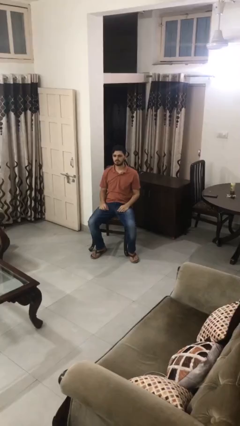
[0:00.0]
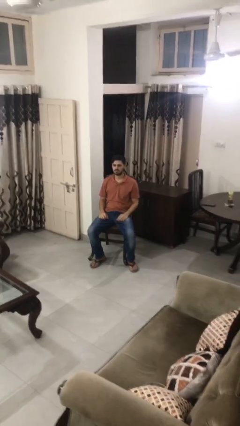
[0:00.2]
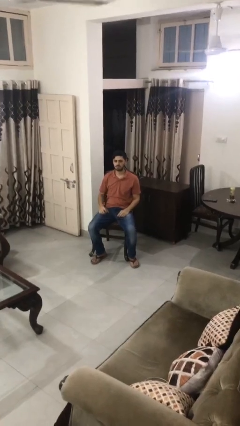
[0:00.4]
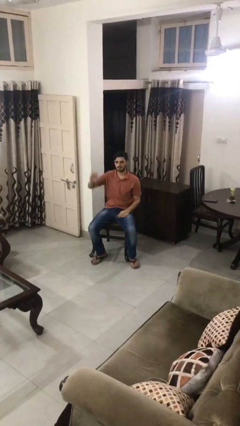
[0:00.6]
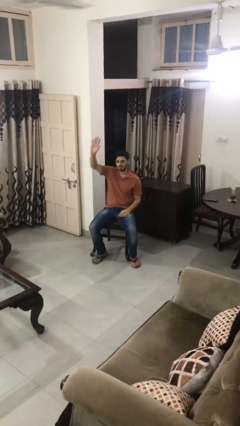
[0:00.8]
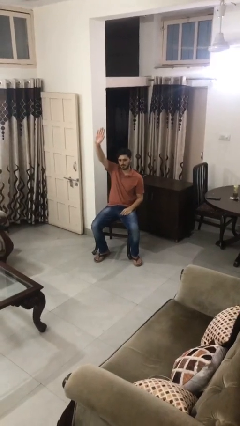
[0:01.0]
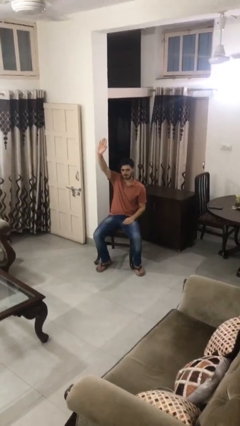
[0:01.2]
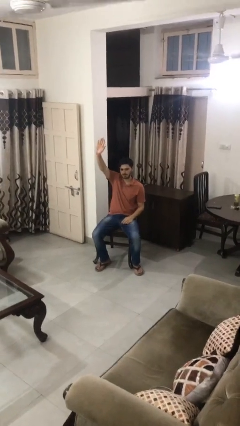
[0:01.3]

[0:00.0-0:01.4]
person gestures raise hand

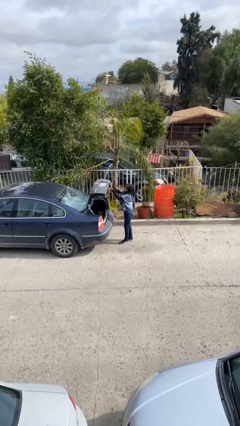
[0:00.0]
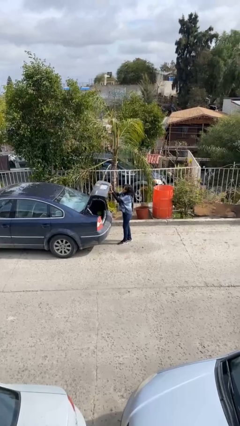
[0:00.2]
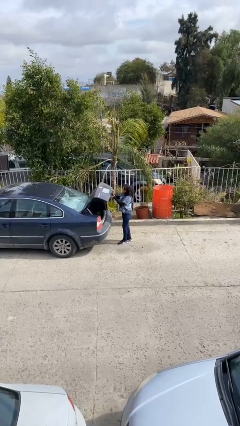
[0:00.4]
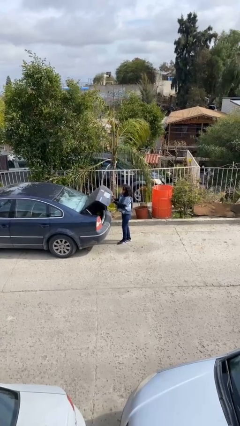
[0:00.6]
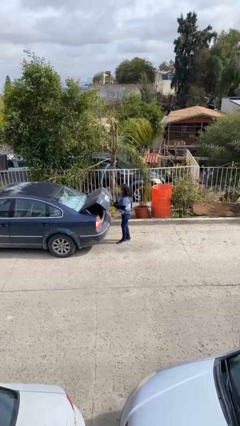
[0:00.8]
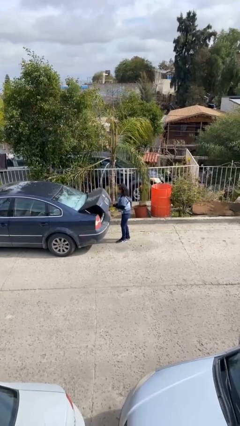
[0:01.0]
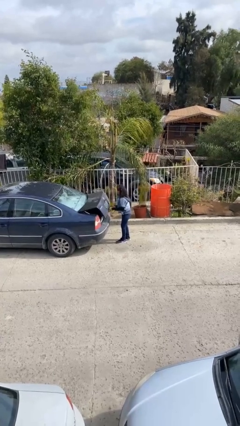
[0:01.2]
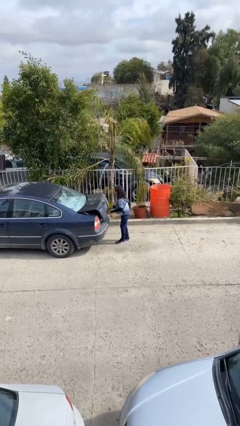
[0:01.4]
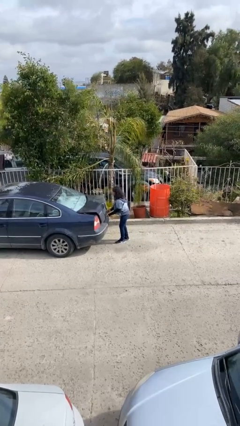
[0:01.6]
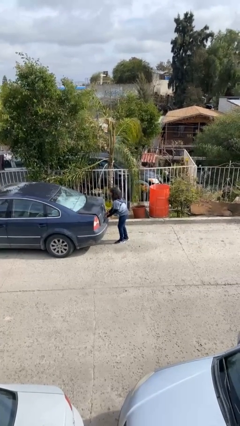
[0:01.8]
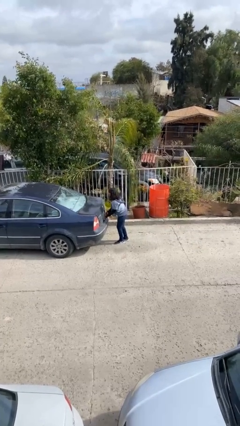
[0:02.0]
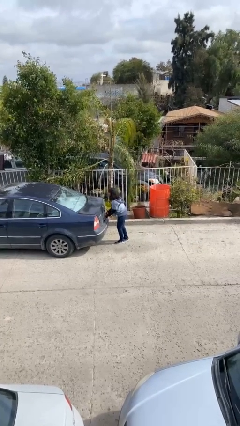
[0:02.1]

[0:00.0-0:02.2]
person closes car trunk

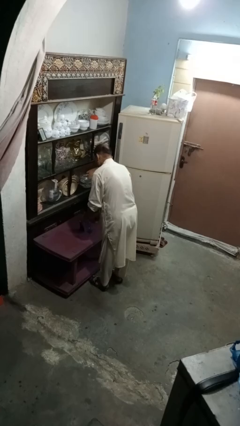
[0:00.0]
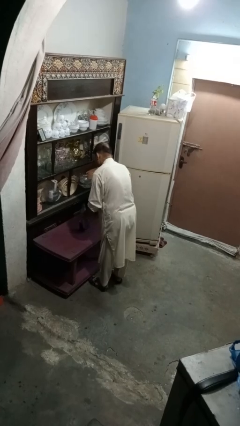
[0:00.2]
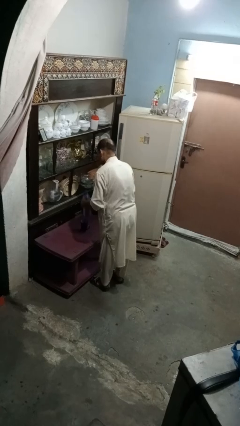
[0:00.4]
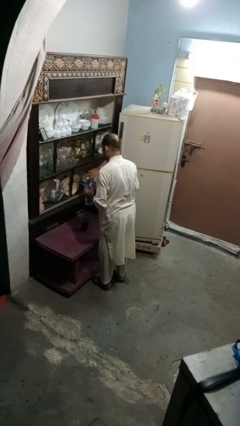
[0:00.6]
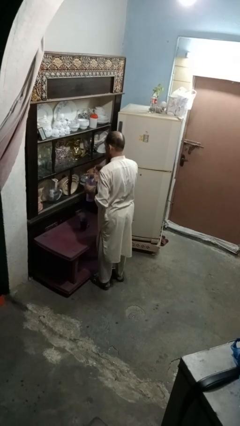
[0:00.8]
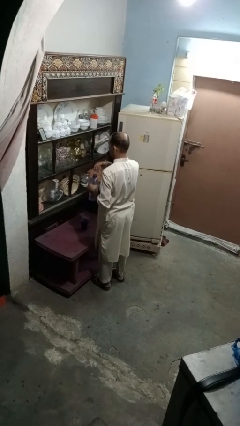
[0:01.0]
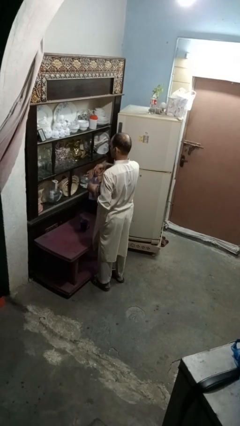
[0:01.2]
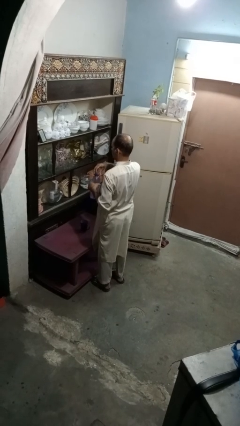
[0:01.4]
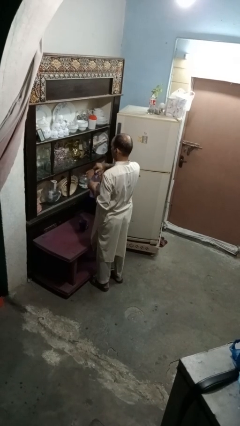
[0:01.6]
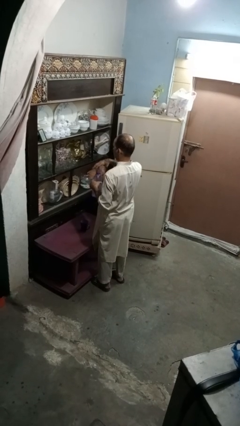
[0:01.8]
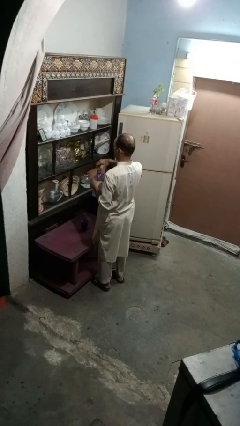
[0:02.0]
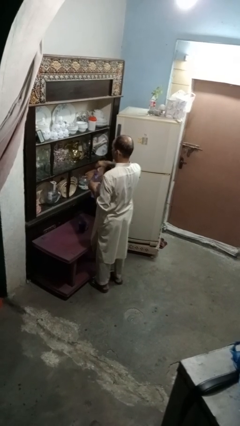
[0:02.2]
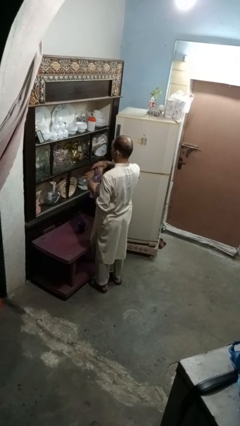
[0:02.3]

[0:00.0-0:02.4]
person screws lid to bottle

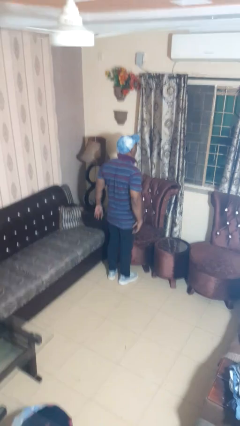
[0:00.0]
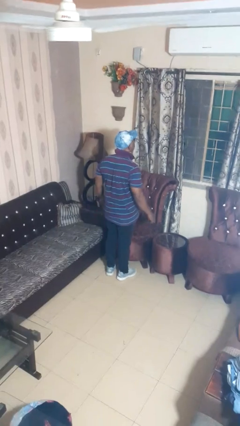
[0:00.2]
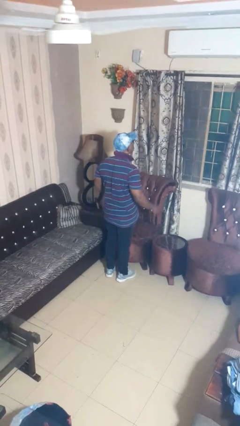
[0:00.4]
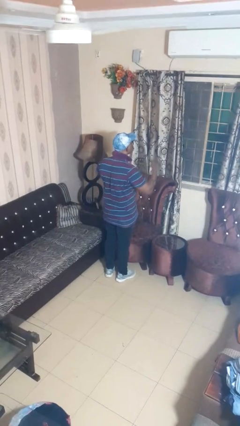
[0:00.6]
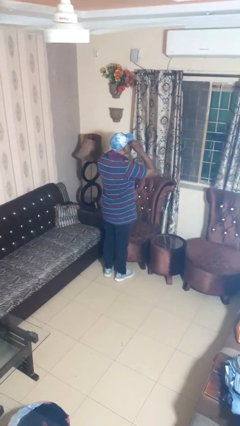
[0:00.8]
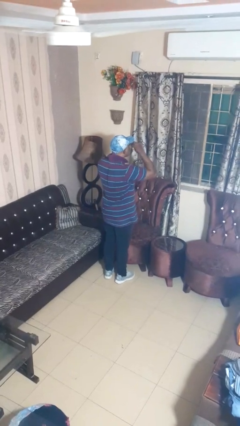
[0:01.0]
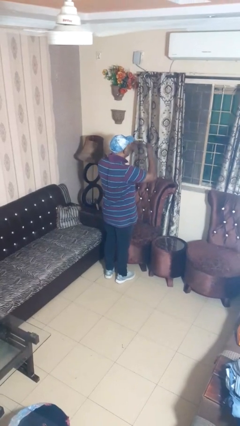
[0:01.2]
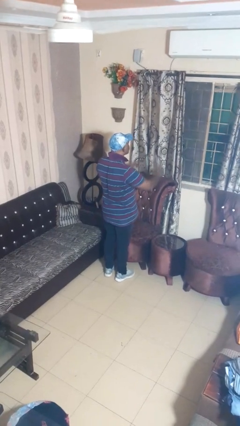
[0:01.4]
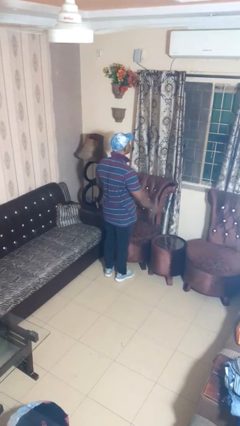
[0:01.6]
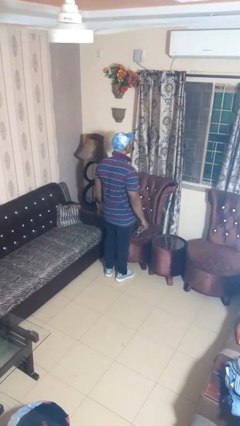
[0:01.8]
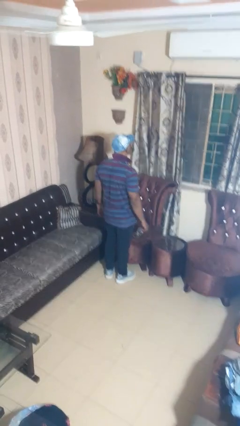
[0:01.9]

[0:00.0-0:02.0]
person takes off sunglasses

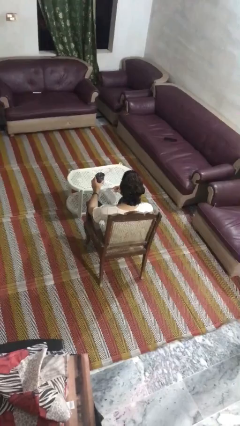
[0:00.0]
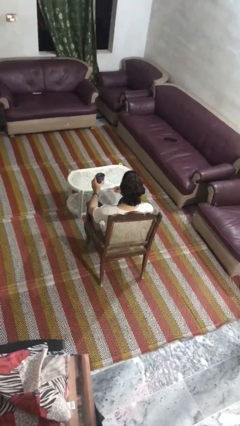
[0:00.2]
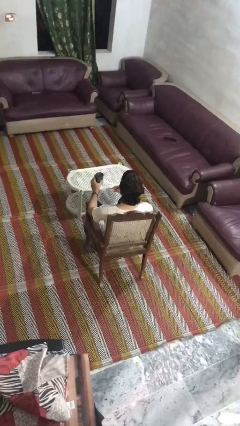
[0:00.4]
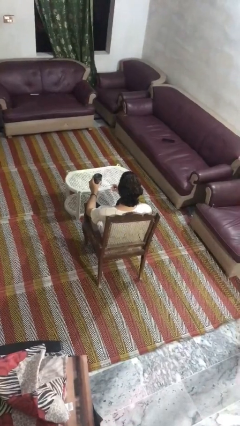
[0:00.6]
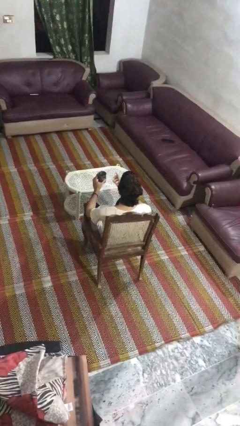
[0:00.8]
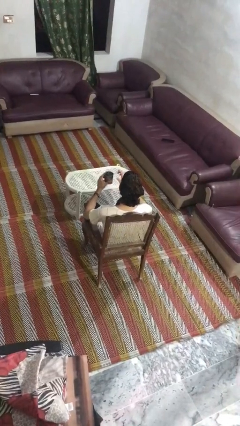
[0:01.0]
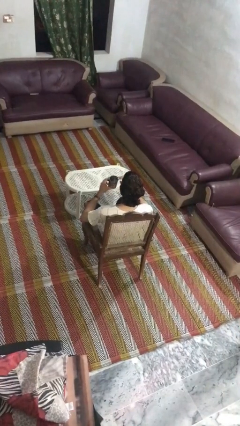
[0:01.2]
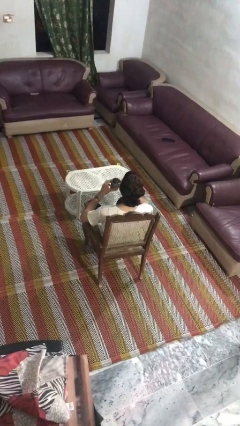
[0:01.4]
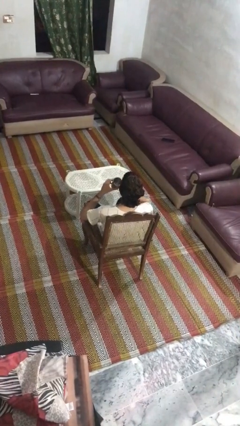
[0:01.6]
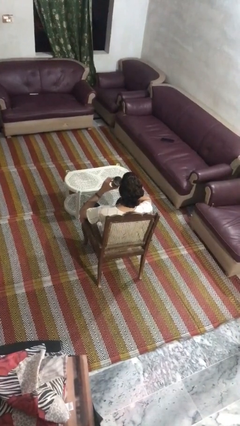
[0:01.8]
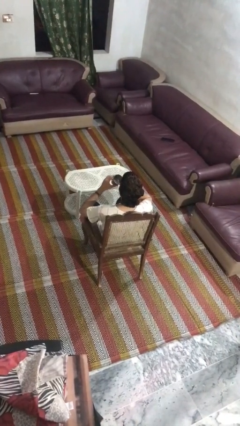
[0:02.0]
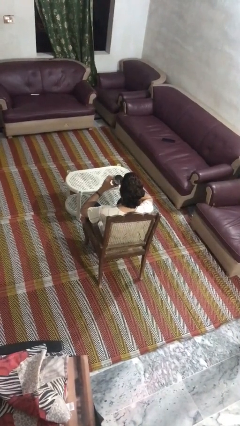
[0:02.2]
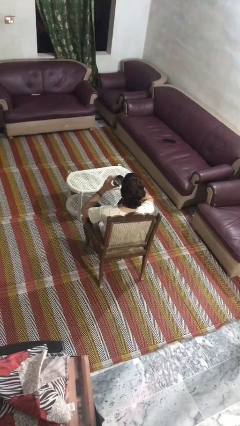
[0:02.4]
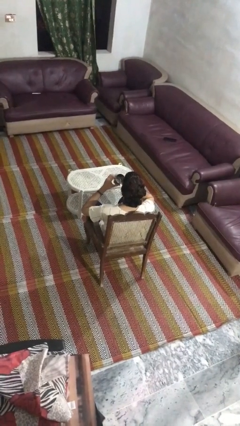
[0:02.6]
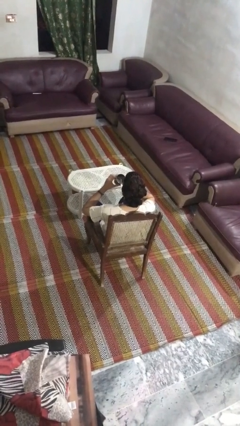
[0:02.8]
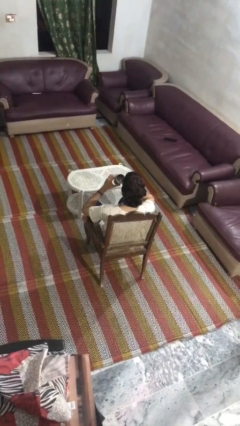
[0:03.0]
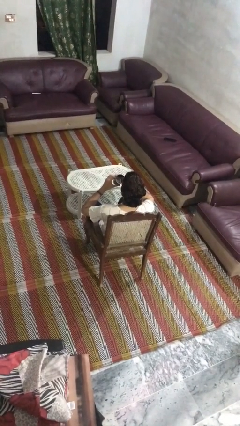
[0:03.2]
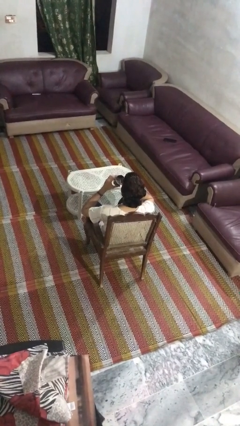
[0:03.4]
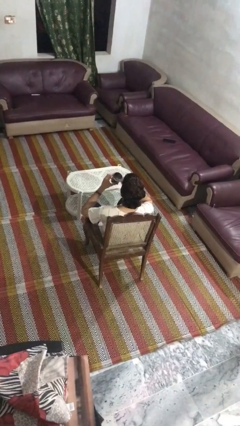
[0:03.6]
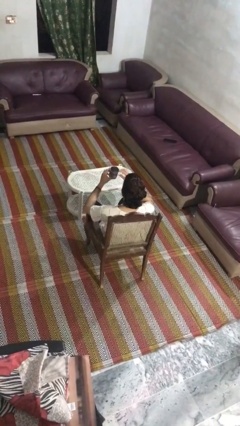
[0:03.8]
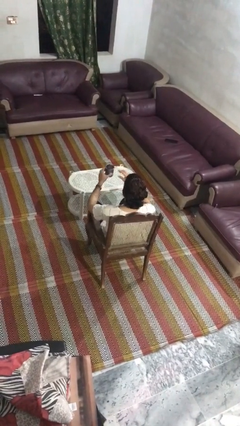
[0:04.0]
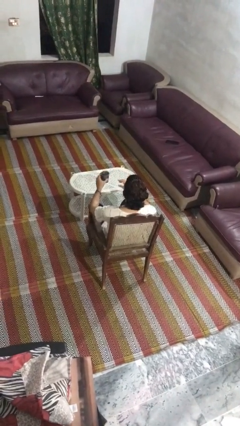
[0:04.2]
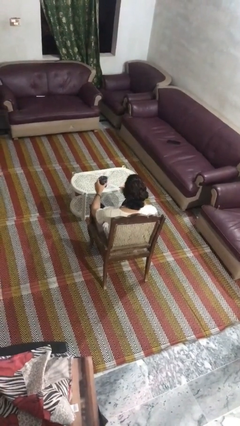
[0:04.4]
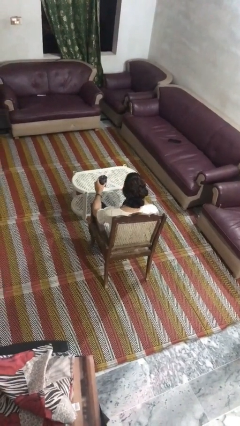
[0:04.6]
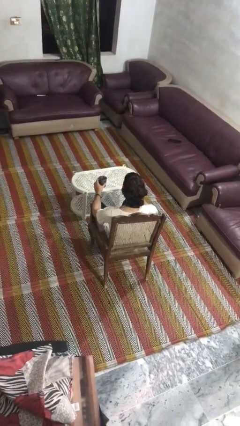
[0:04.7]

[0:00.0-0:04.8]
person drinks from straw

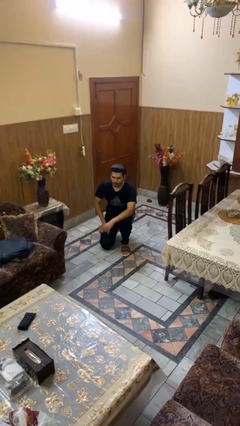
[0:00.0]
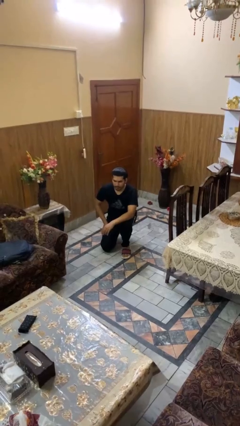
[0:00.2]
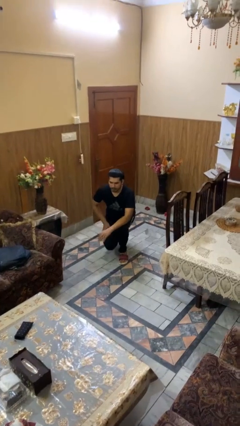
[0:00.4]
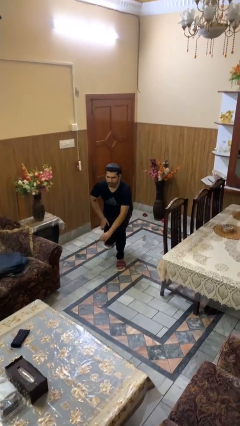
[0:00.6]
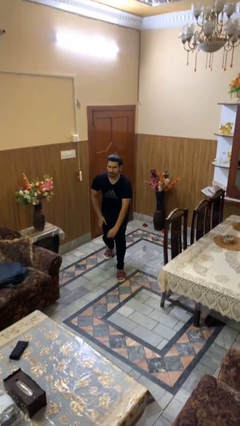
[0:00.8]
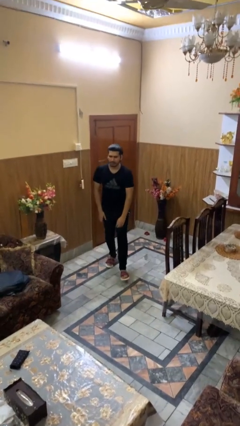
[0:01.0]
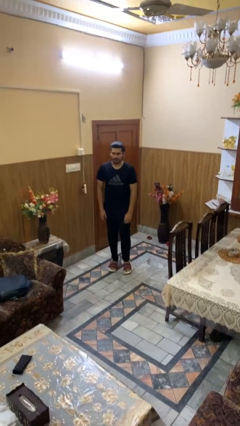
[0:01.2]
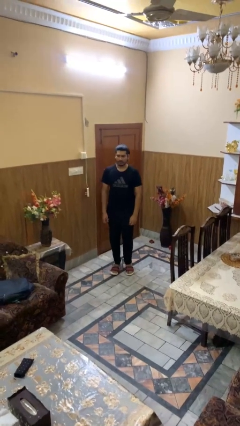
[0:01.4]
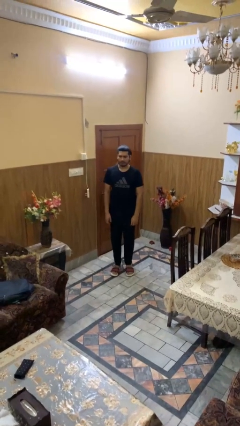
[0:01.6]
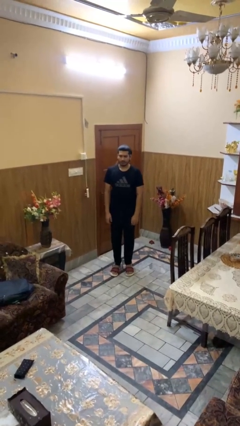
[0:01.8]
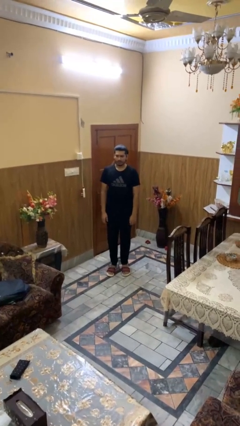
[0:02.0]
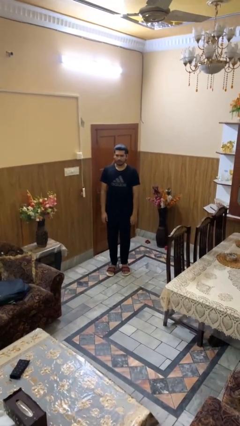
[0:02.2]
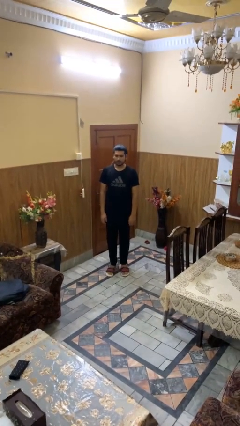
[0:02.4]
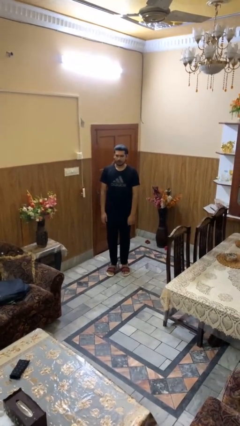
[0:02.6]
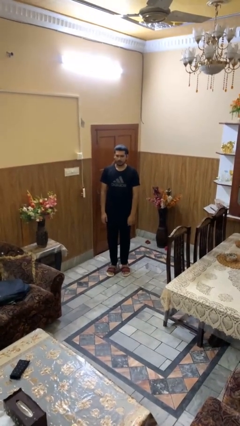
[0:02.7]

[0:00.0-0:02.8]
person stands up from floor

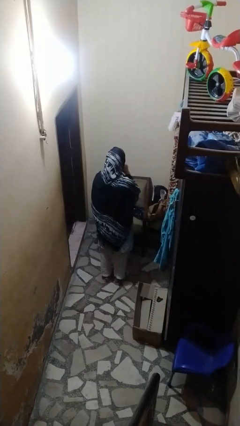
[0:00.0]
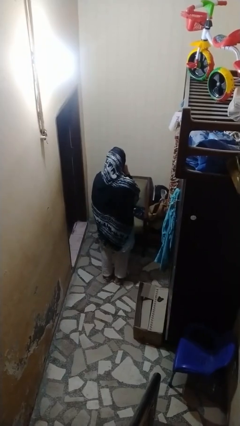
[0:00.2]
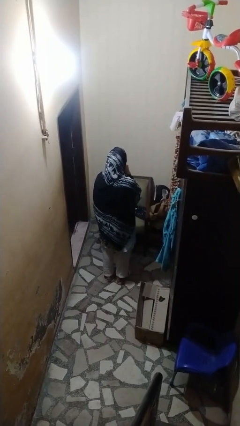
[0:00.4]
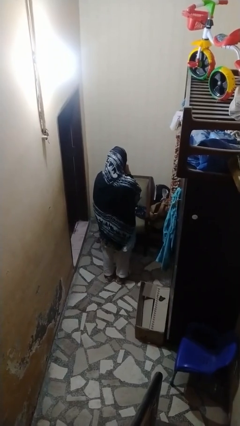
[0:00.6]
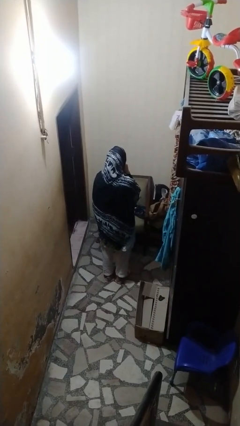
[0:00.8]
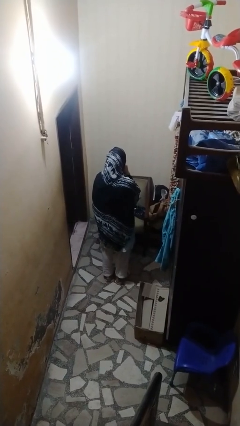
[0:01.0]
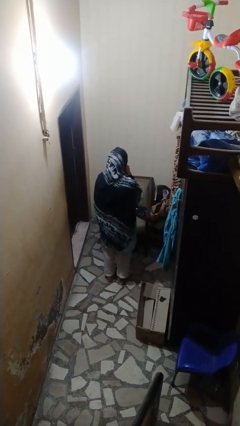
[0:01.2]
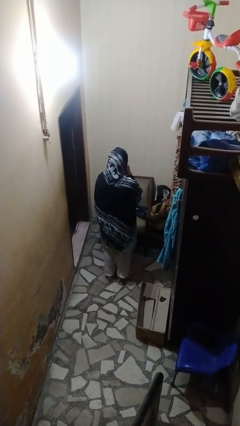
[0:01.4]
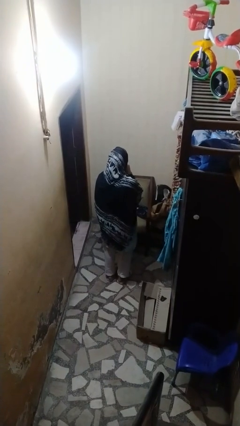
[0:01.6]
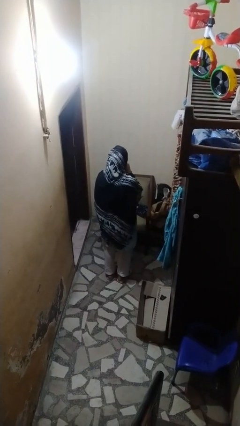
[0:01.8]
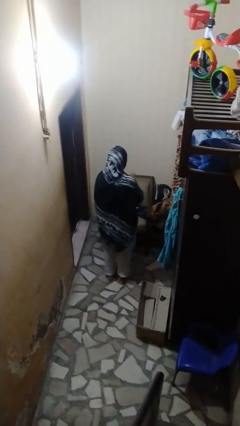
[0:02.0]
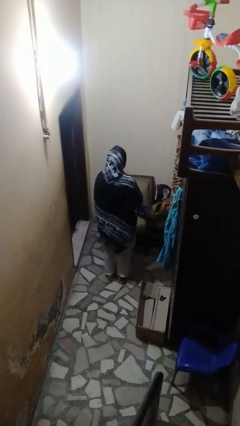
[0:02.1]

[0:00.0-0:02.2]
person gestures be quiet
